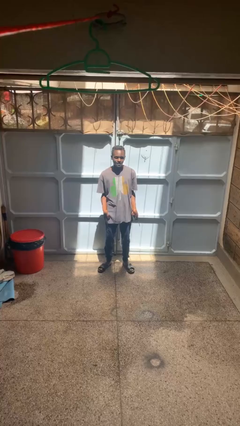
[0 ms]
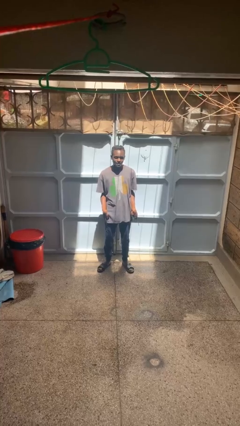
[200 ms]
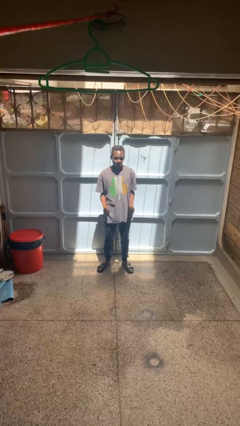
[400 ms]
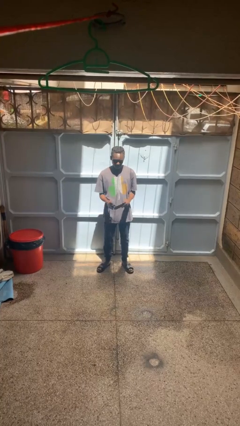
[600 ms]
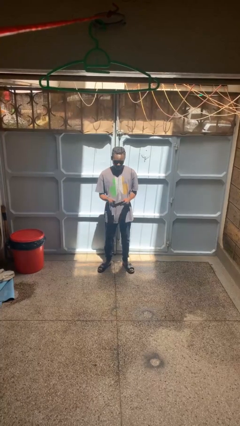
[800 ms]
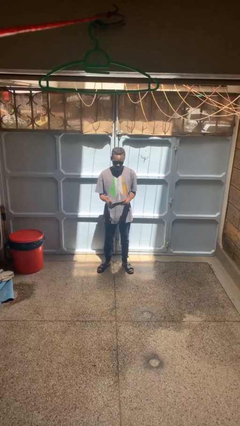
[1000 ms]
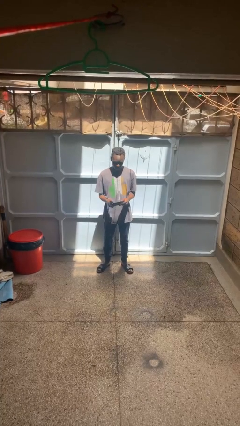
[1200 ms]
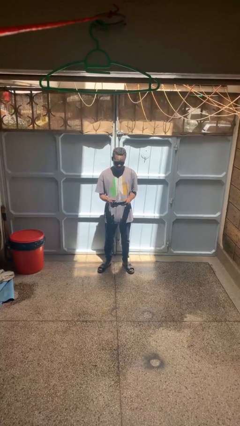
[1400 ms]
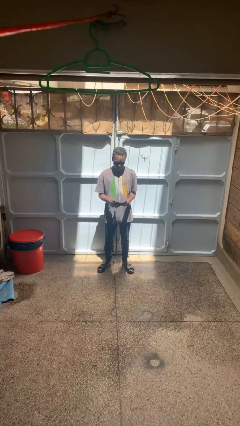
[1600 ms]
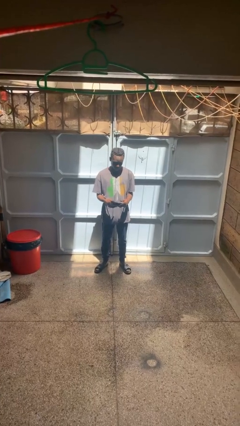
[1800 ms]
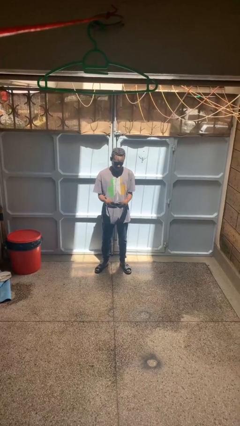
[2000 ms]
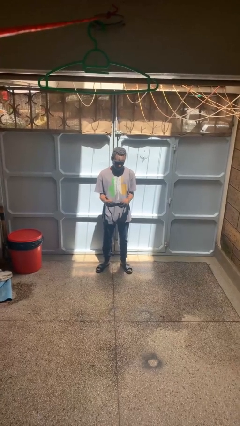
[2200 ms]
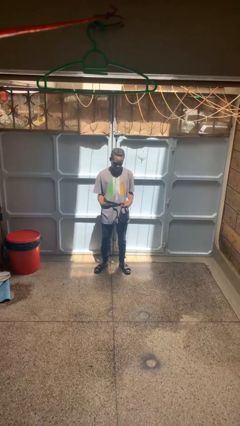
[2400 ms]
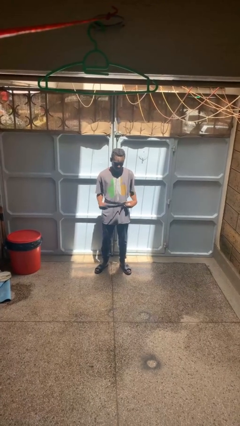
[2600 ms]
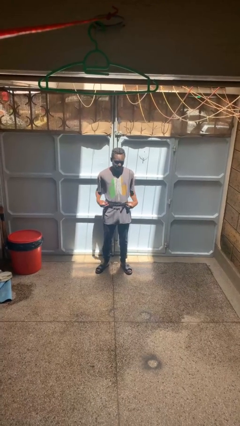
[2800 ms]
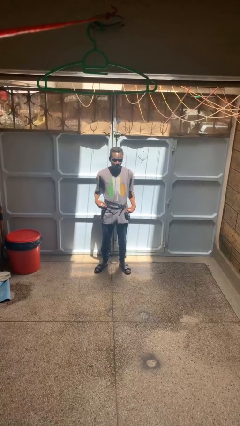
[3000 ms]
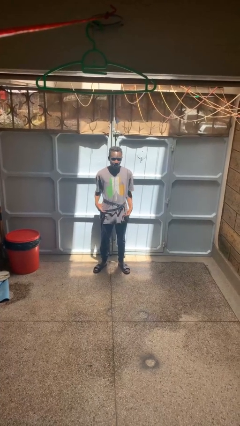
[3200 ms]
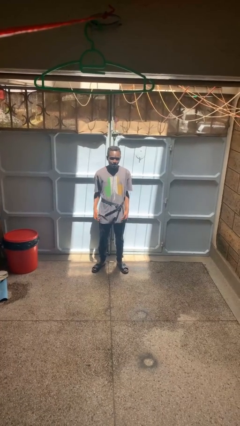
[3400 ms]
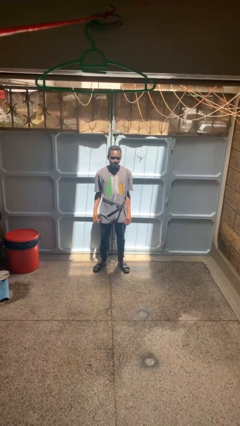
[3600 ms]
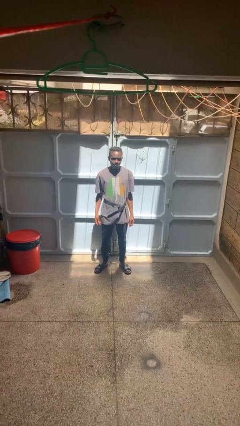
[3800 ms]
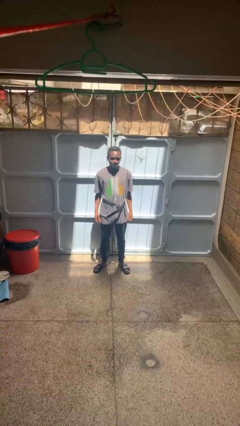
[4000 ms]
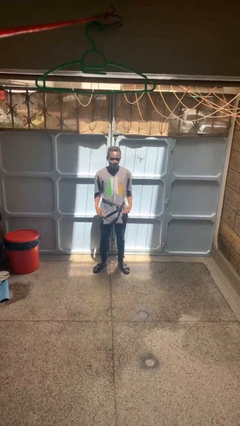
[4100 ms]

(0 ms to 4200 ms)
person puts on belt

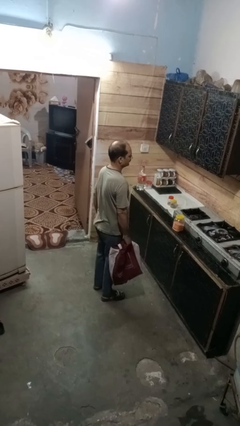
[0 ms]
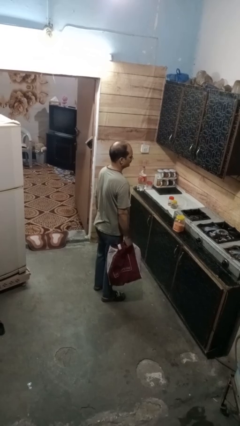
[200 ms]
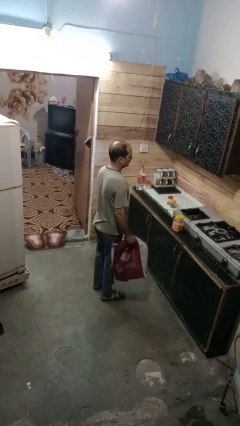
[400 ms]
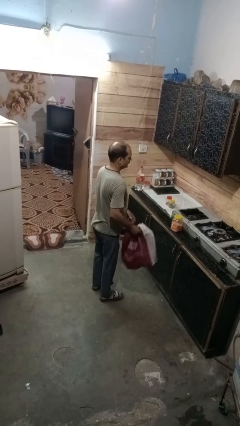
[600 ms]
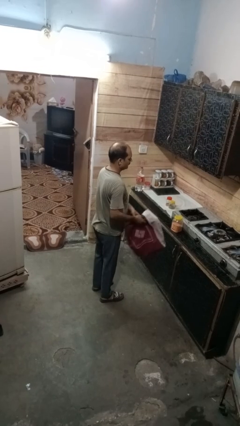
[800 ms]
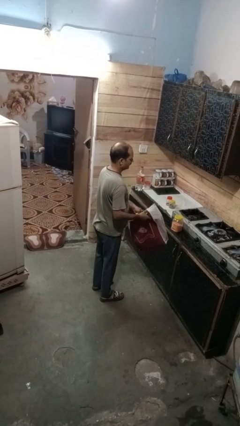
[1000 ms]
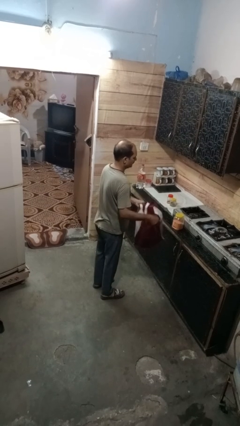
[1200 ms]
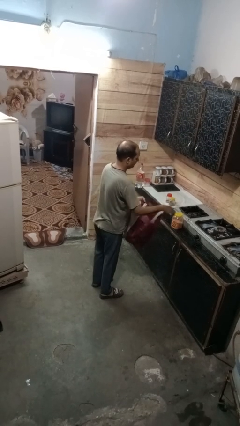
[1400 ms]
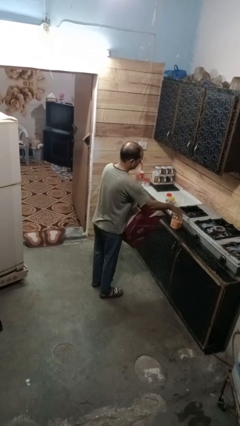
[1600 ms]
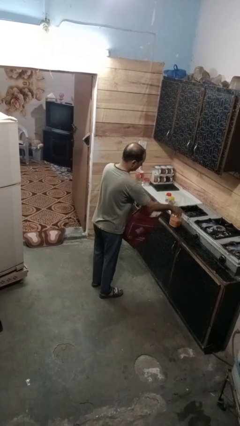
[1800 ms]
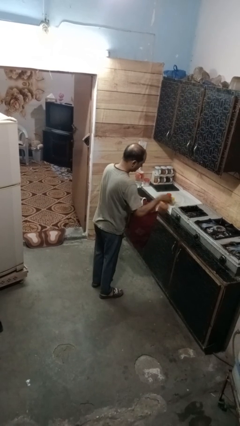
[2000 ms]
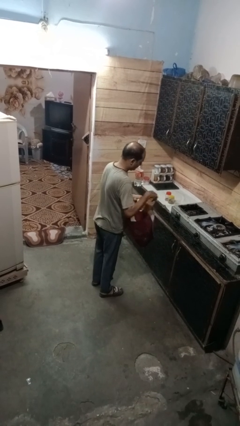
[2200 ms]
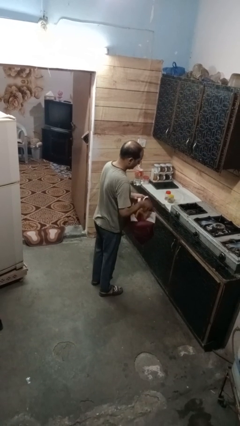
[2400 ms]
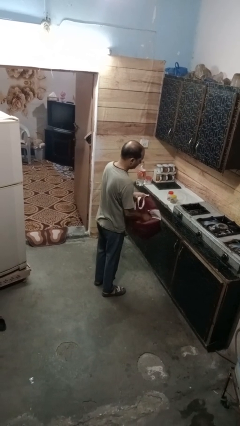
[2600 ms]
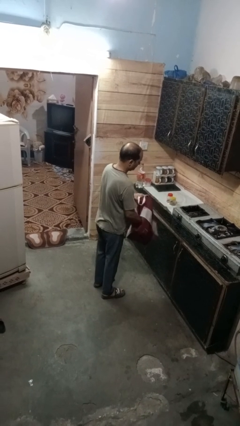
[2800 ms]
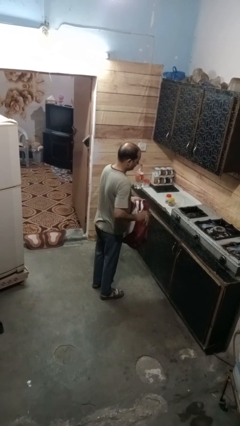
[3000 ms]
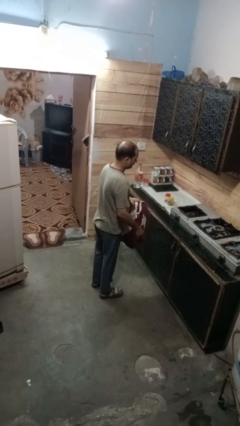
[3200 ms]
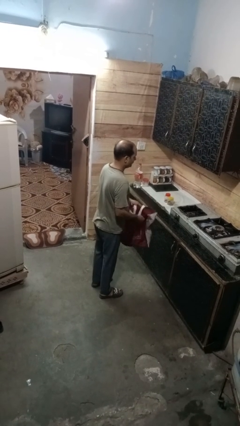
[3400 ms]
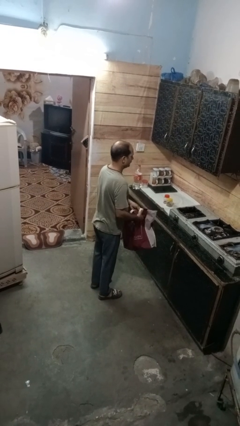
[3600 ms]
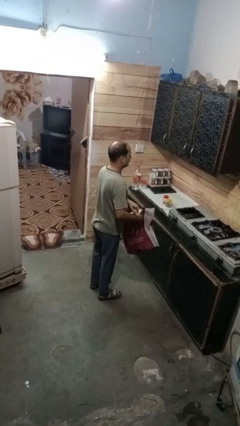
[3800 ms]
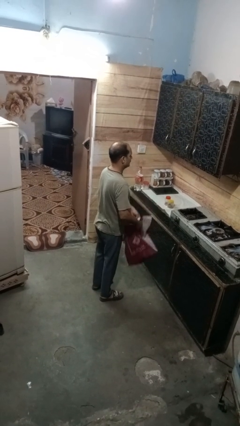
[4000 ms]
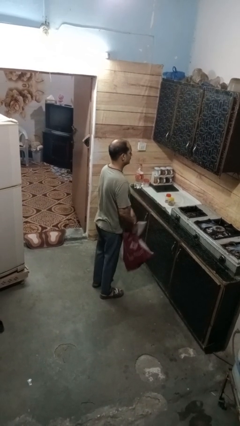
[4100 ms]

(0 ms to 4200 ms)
person puts object into bag

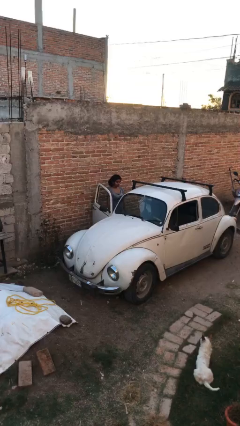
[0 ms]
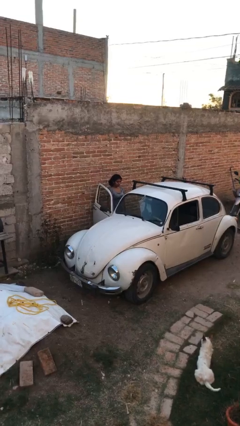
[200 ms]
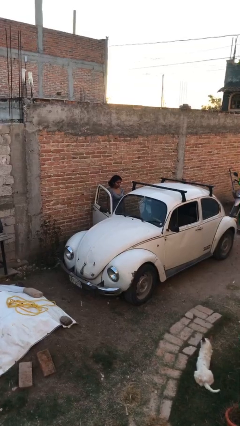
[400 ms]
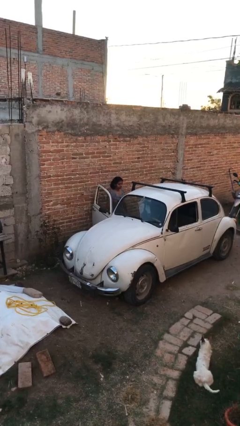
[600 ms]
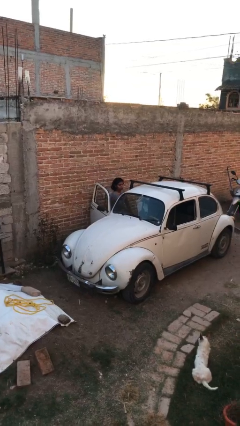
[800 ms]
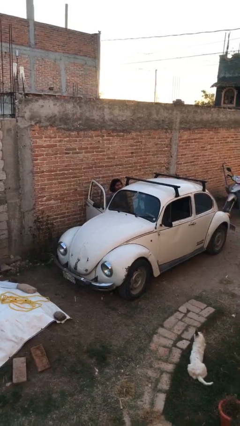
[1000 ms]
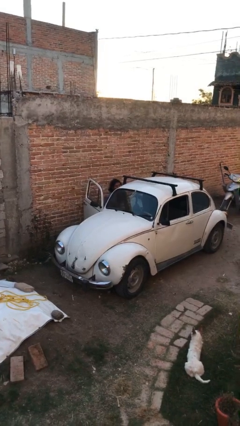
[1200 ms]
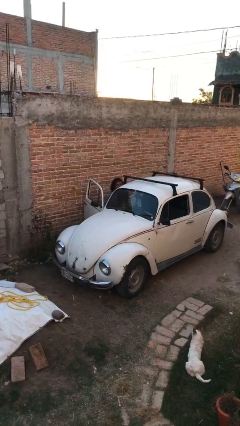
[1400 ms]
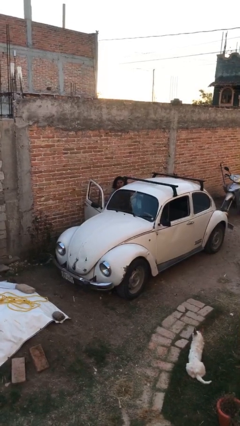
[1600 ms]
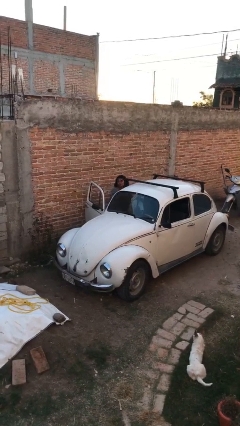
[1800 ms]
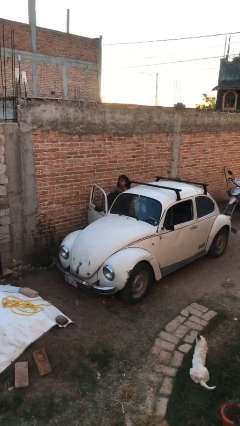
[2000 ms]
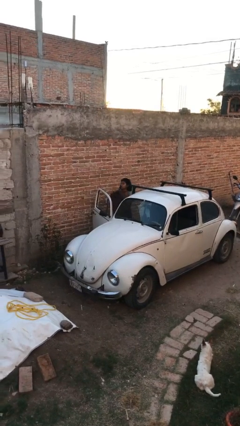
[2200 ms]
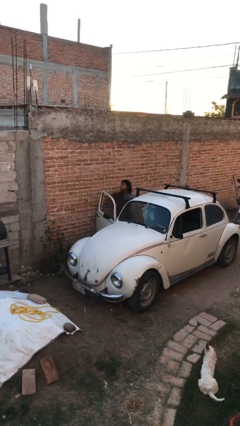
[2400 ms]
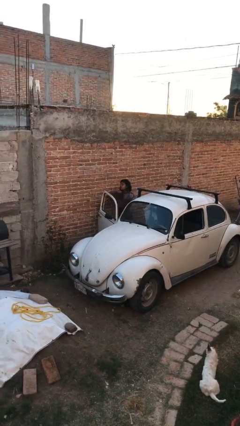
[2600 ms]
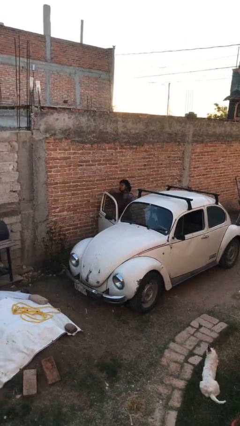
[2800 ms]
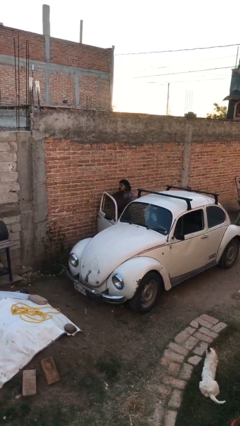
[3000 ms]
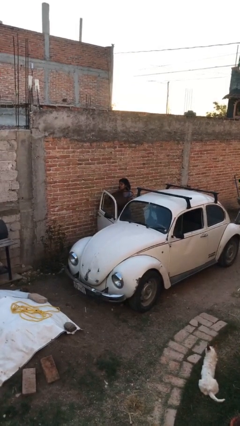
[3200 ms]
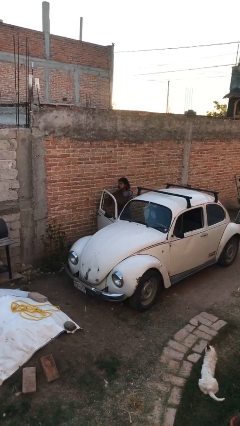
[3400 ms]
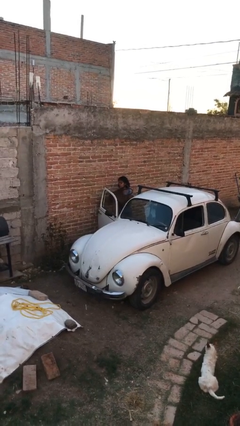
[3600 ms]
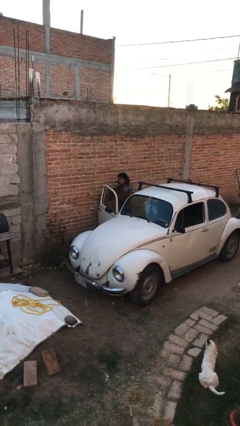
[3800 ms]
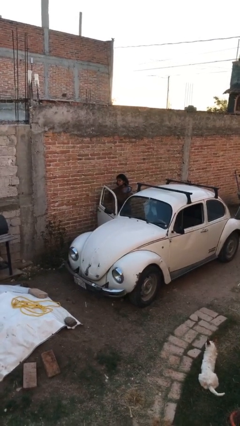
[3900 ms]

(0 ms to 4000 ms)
person unloads car

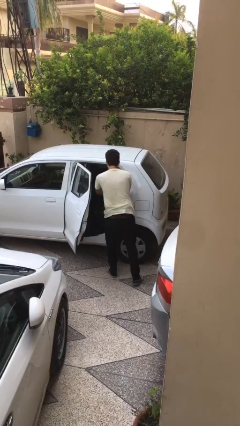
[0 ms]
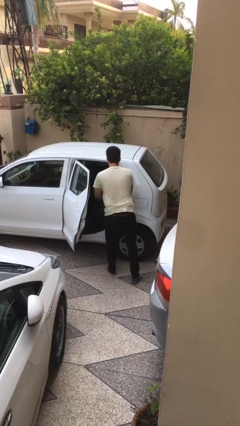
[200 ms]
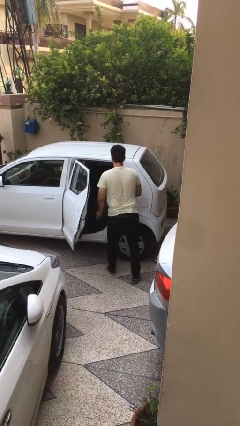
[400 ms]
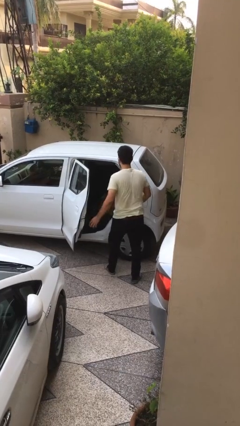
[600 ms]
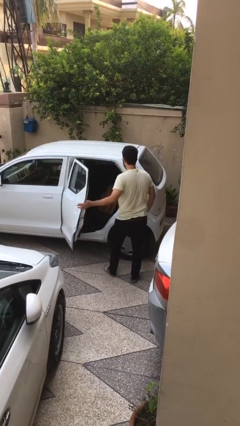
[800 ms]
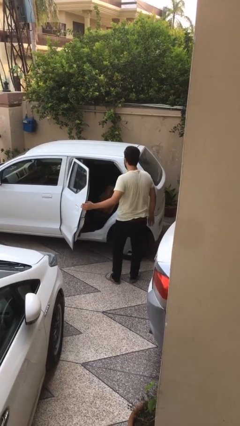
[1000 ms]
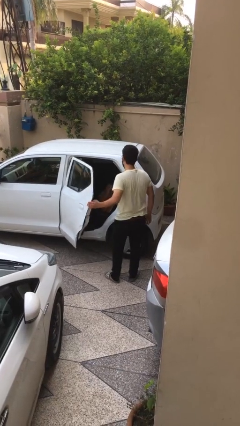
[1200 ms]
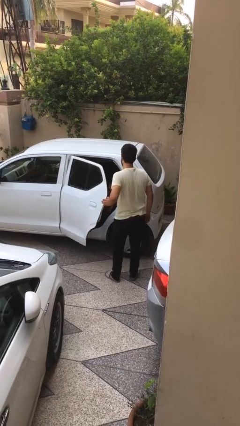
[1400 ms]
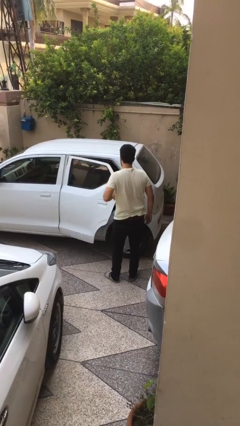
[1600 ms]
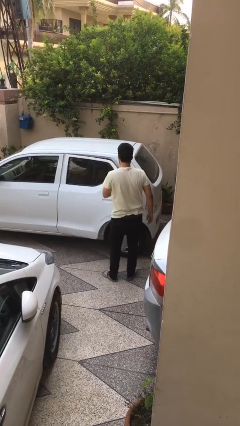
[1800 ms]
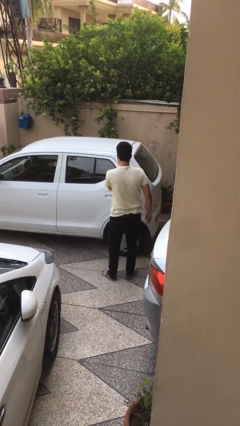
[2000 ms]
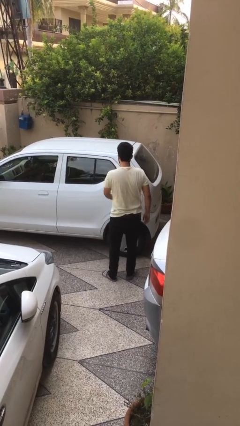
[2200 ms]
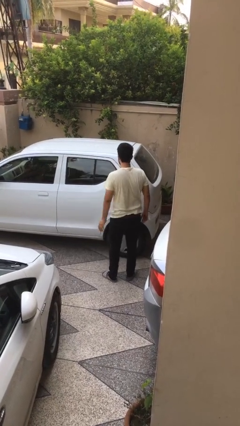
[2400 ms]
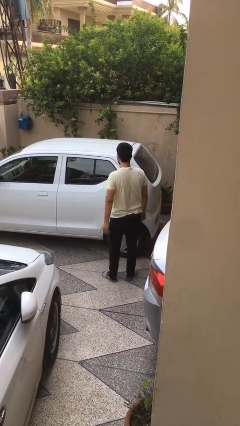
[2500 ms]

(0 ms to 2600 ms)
person closes car door

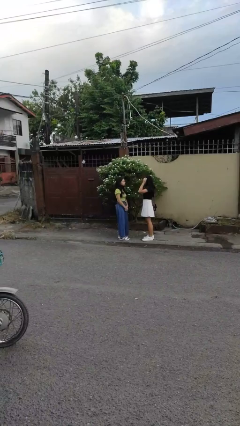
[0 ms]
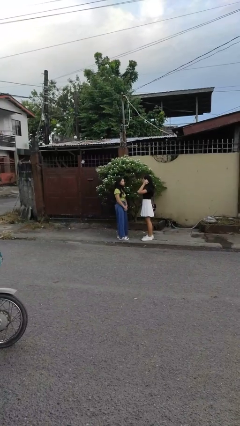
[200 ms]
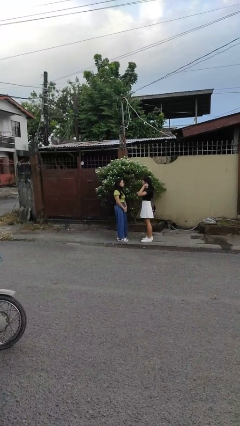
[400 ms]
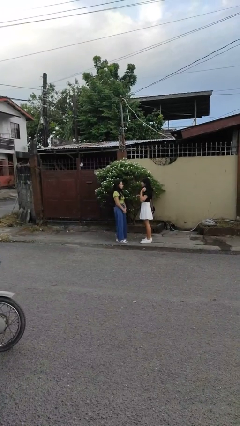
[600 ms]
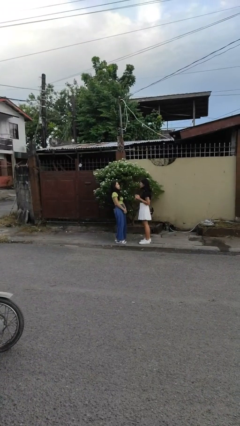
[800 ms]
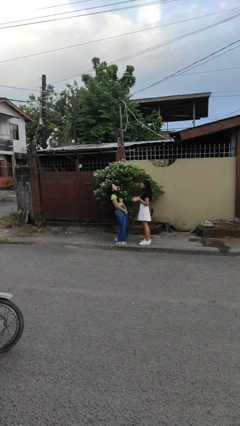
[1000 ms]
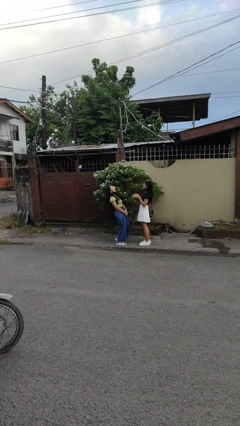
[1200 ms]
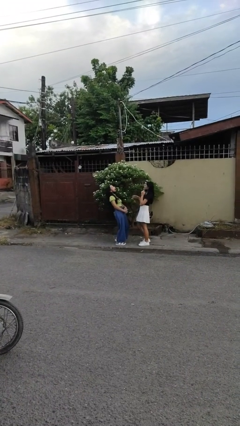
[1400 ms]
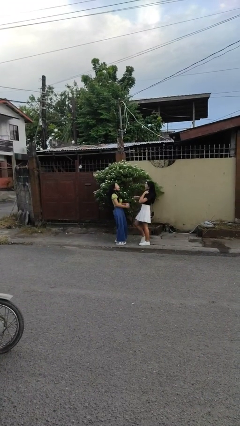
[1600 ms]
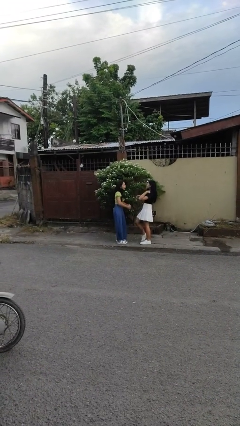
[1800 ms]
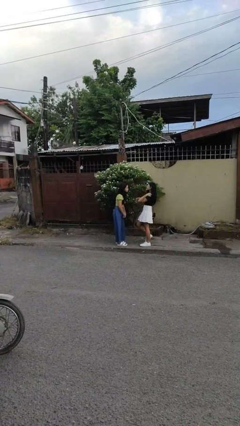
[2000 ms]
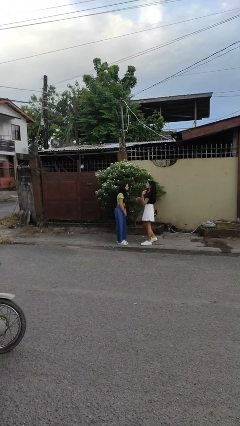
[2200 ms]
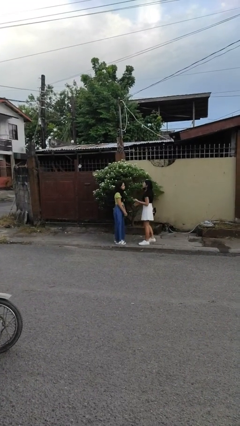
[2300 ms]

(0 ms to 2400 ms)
person laughs with person

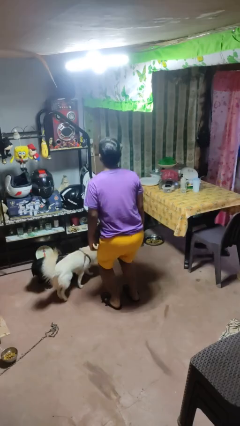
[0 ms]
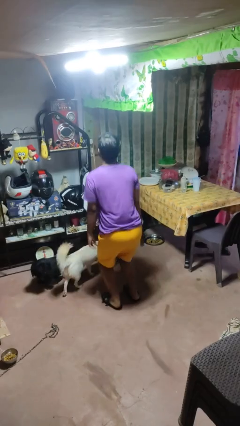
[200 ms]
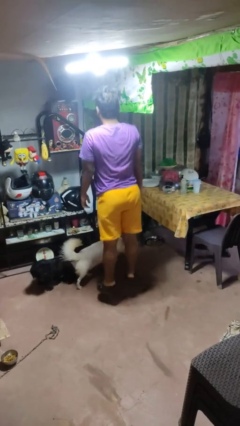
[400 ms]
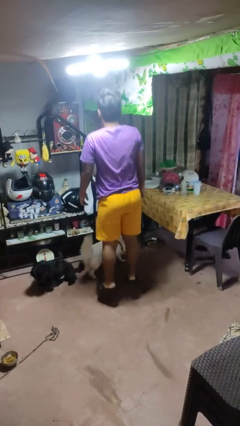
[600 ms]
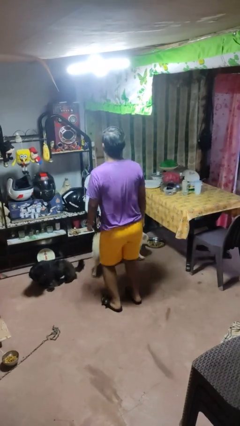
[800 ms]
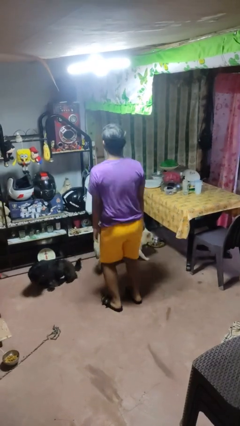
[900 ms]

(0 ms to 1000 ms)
person jumps
